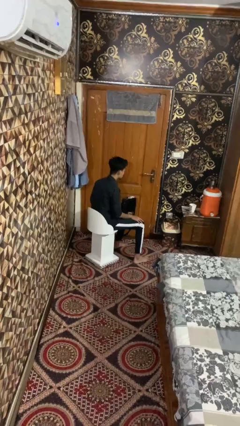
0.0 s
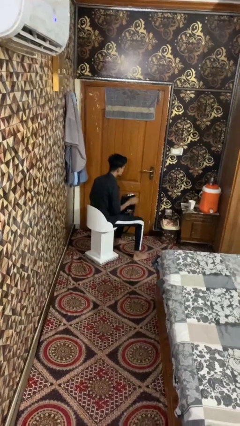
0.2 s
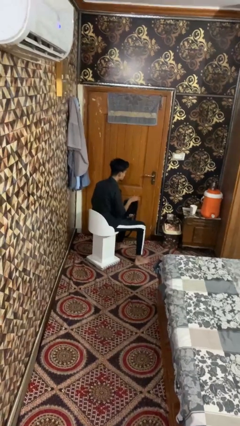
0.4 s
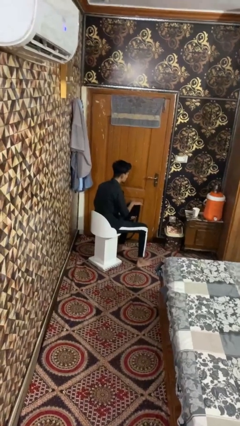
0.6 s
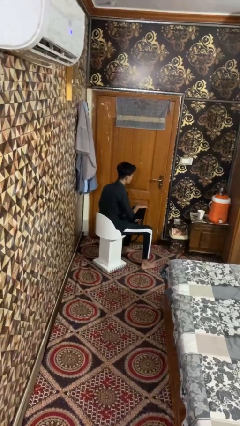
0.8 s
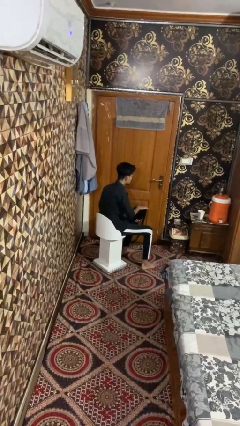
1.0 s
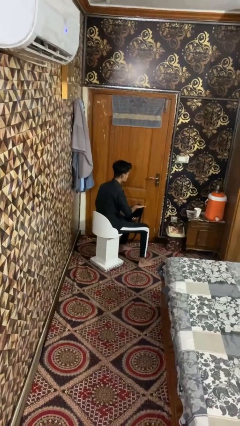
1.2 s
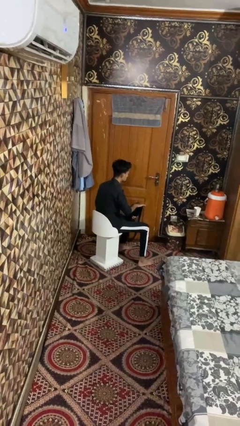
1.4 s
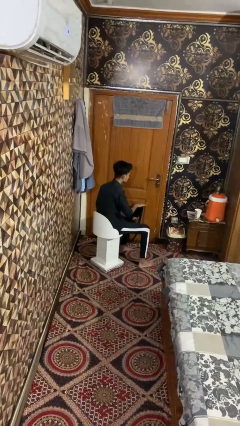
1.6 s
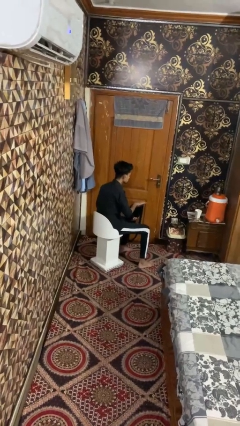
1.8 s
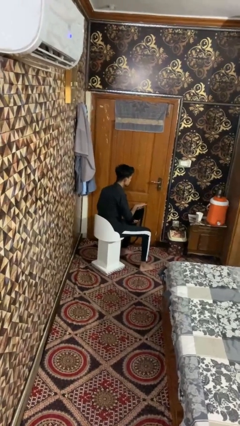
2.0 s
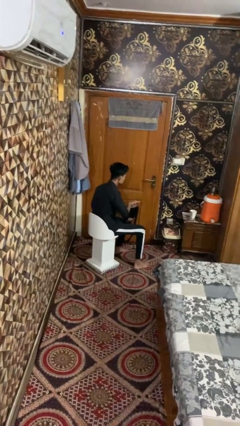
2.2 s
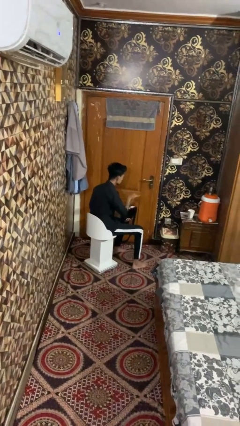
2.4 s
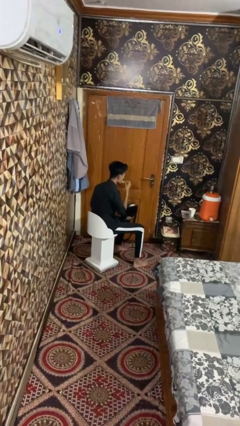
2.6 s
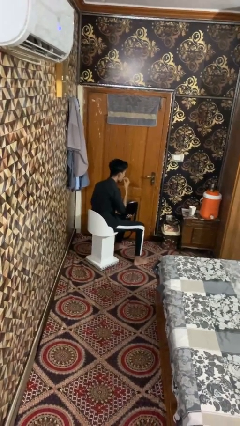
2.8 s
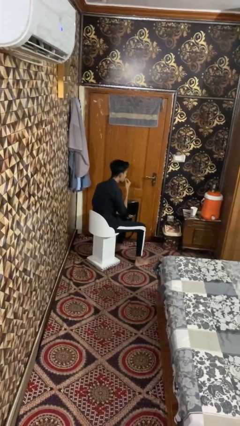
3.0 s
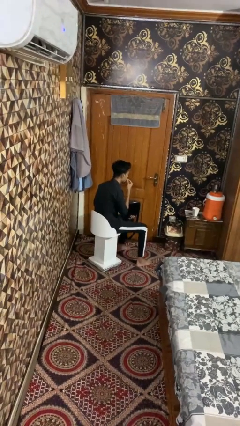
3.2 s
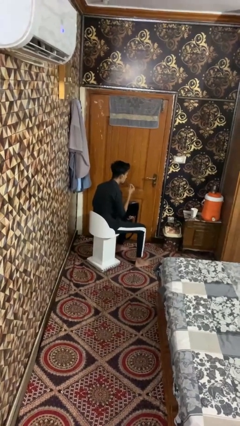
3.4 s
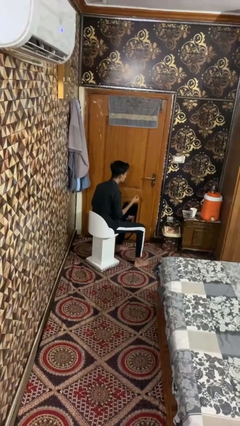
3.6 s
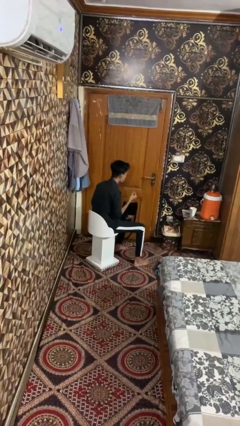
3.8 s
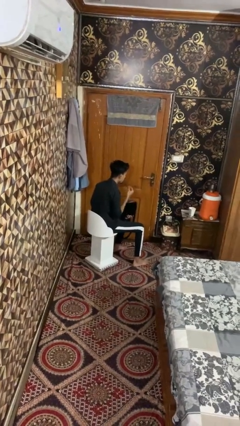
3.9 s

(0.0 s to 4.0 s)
person eats snack from bag

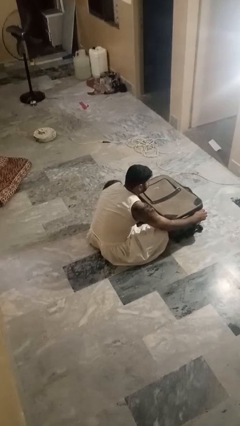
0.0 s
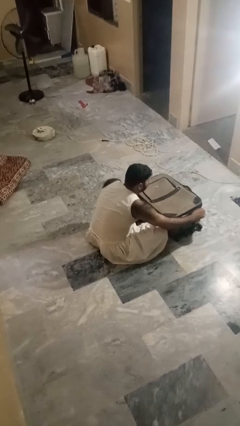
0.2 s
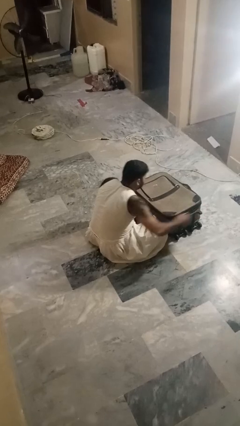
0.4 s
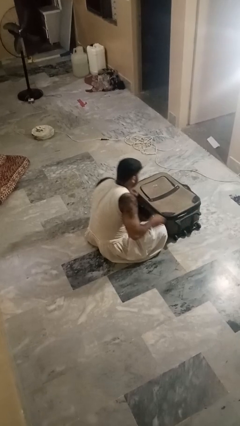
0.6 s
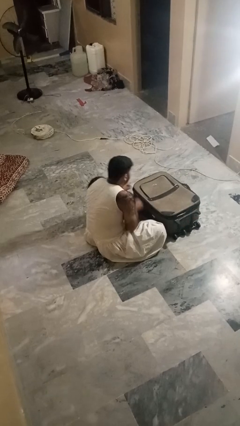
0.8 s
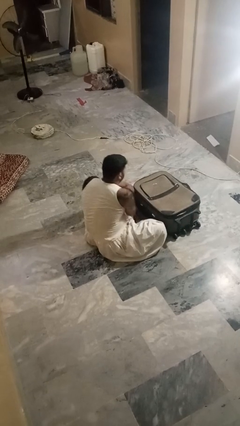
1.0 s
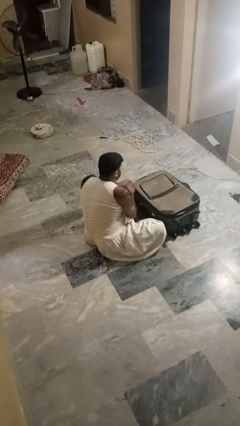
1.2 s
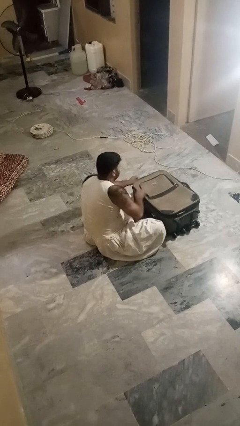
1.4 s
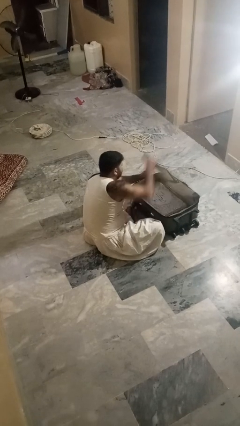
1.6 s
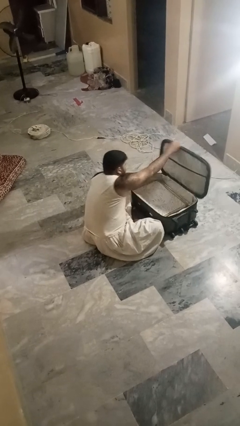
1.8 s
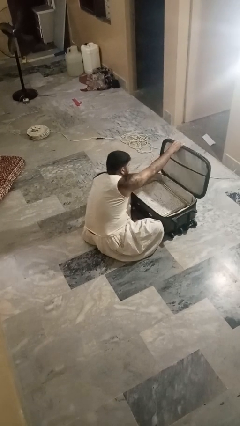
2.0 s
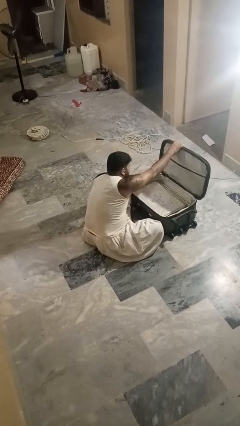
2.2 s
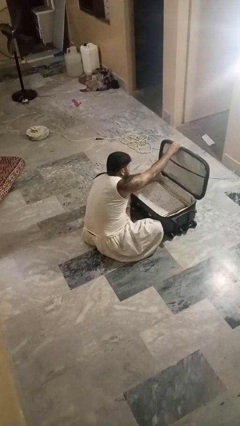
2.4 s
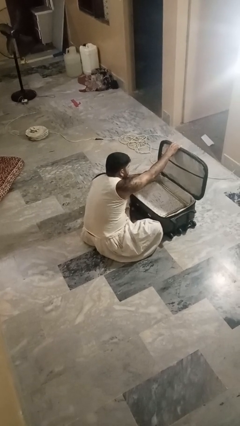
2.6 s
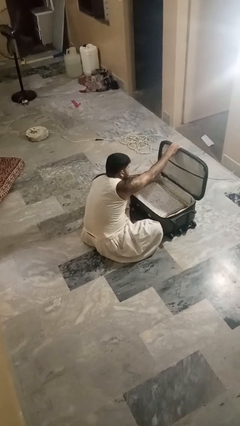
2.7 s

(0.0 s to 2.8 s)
person opens suitcase

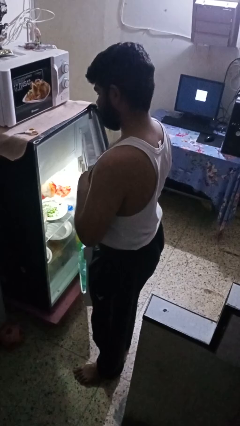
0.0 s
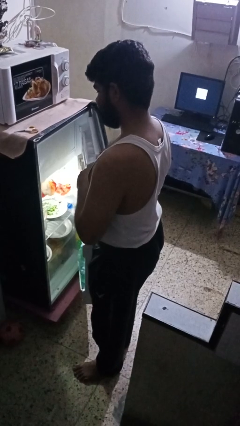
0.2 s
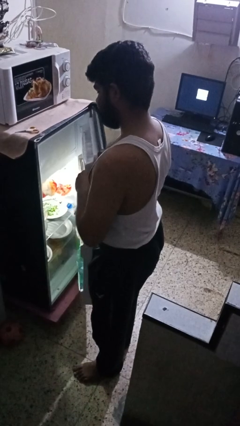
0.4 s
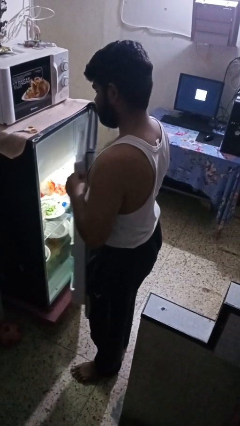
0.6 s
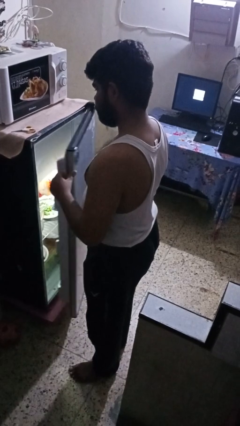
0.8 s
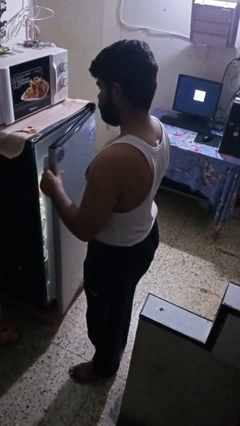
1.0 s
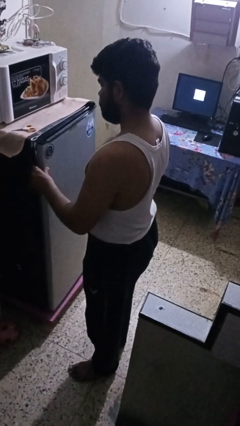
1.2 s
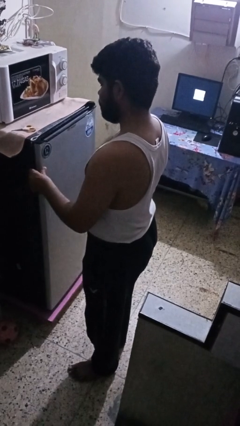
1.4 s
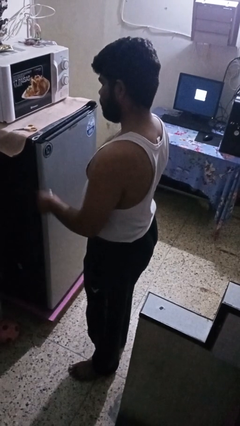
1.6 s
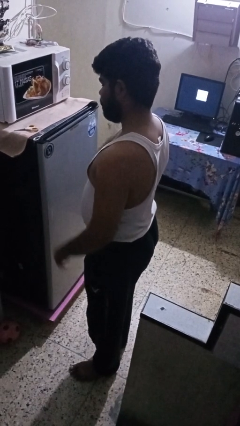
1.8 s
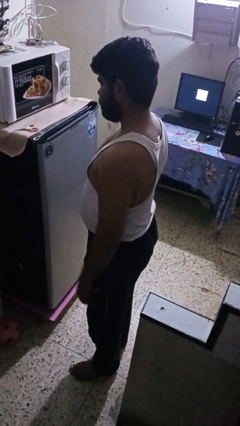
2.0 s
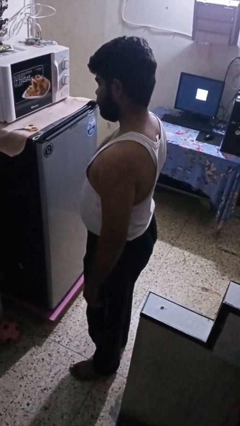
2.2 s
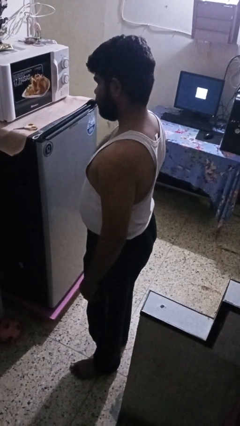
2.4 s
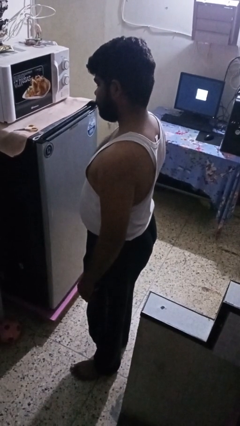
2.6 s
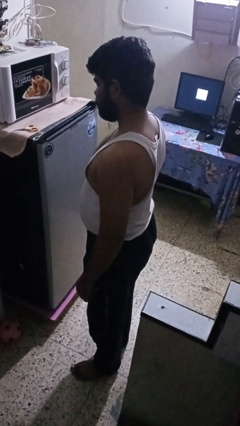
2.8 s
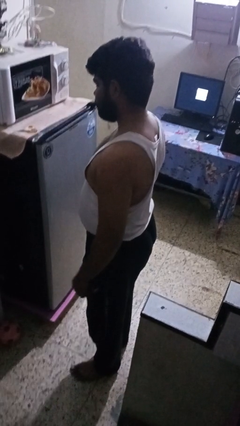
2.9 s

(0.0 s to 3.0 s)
person closes refrigerator

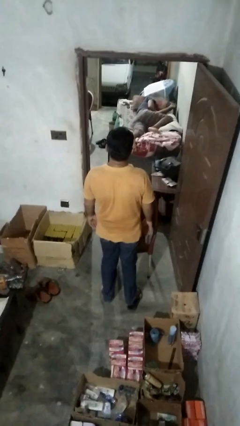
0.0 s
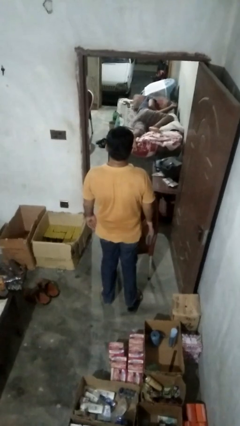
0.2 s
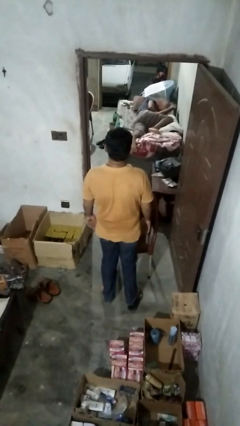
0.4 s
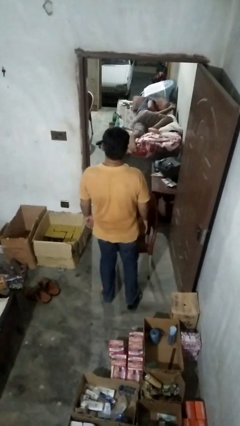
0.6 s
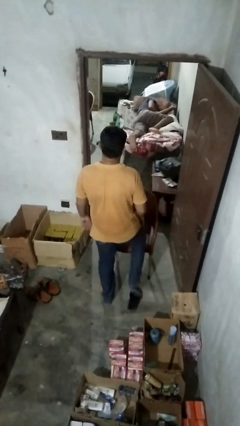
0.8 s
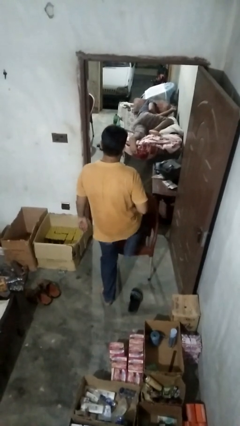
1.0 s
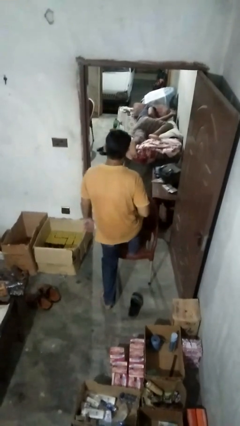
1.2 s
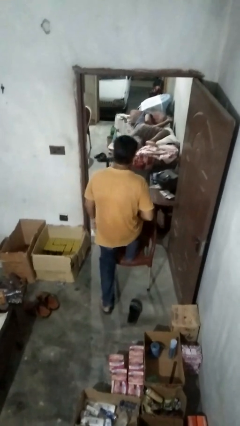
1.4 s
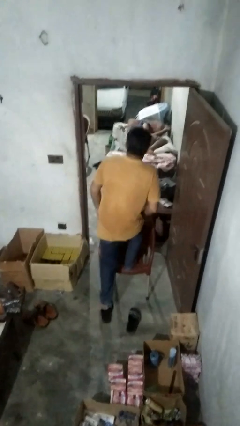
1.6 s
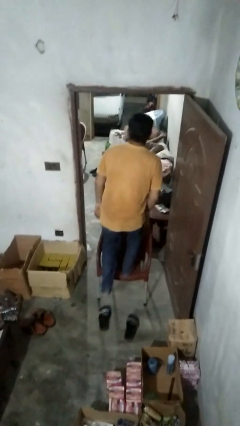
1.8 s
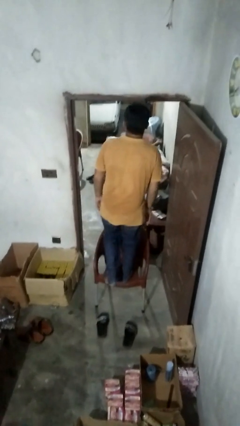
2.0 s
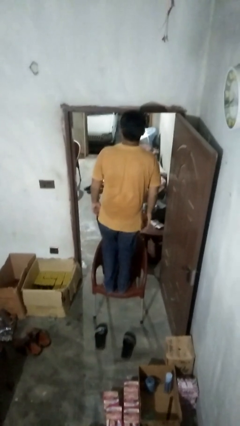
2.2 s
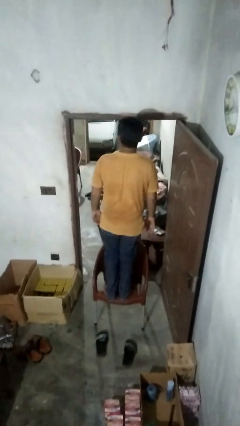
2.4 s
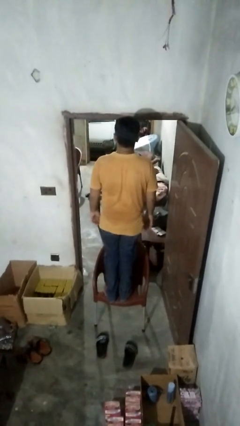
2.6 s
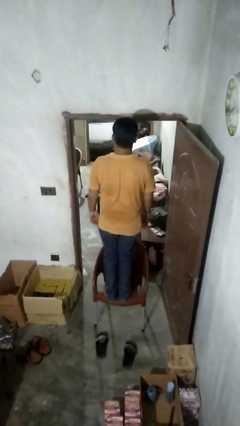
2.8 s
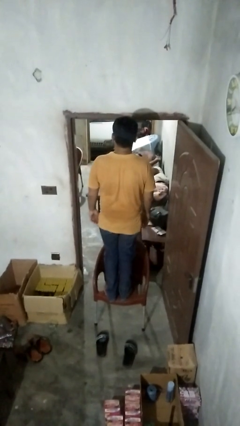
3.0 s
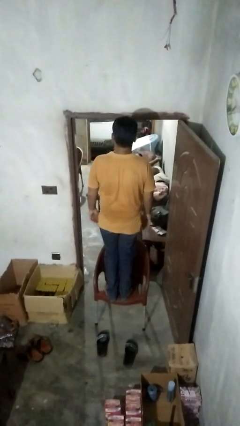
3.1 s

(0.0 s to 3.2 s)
person climbs on chair

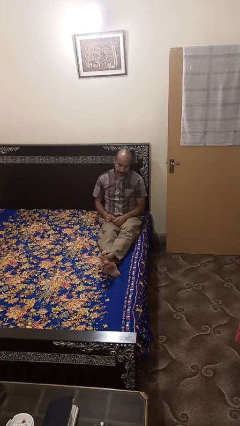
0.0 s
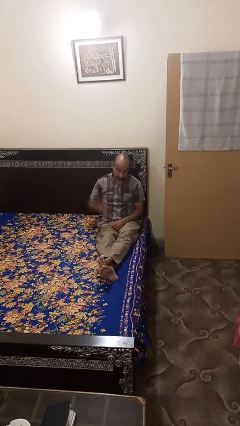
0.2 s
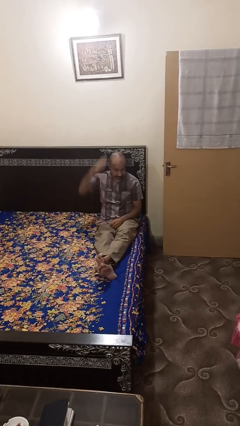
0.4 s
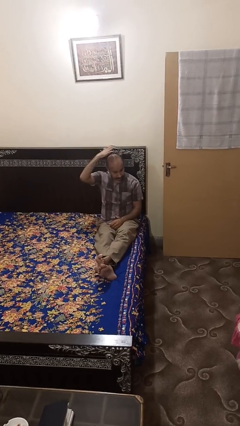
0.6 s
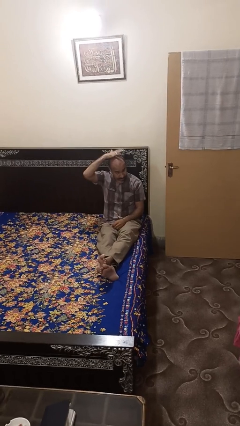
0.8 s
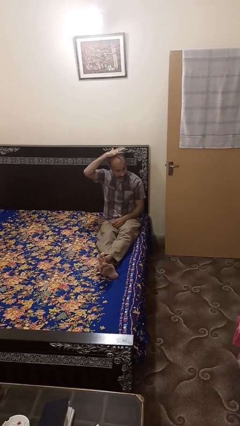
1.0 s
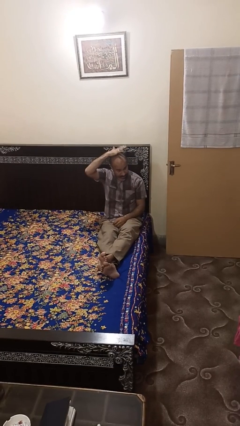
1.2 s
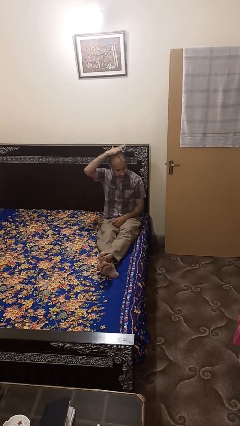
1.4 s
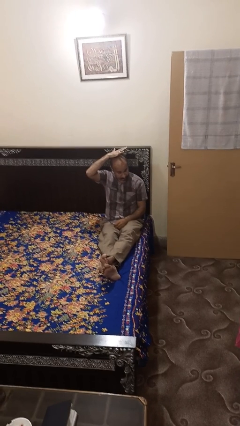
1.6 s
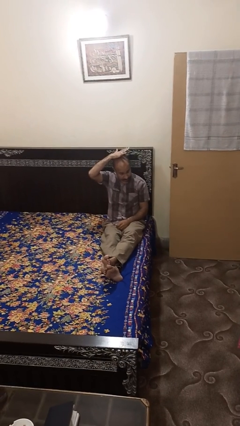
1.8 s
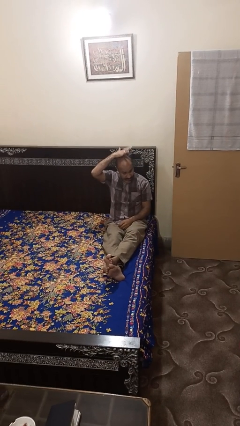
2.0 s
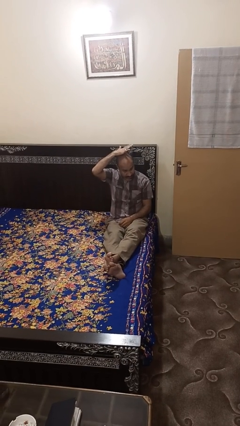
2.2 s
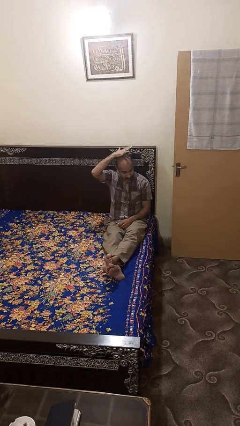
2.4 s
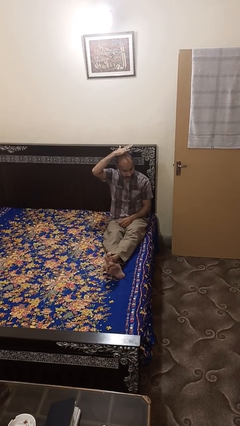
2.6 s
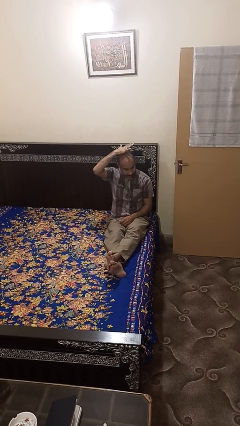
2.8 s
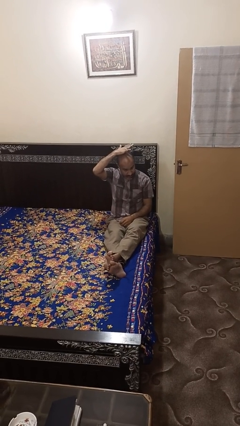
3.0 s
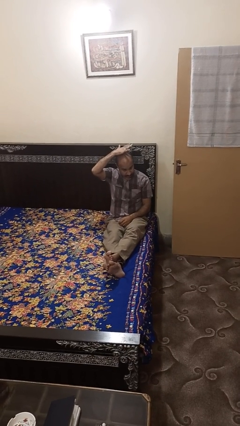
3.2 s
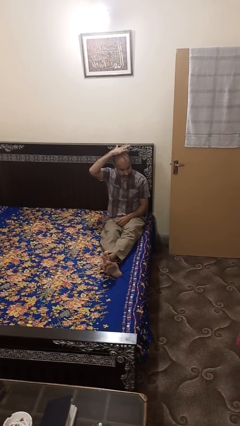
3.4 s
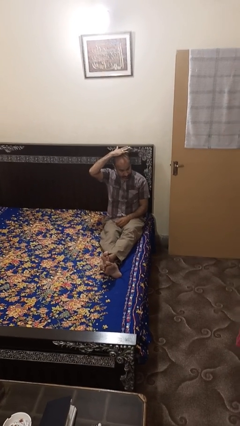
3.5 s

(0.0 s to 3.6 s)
person pats head

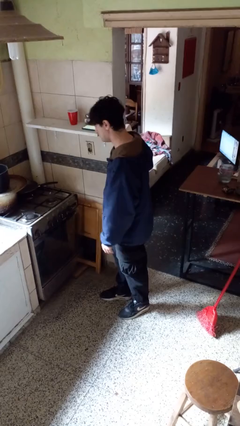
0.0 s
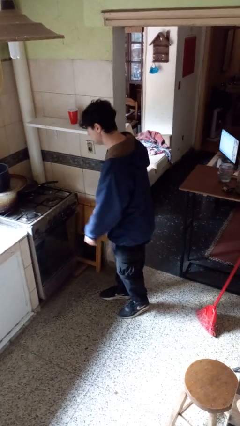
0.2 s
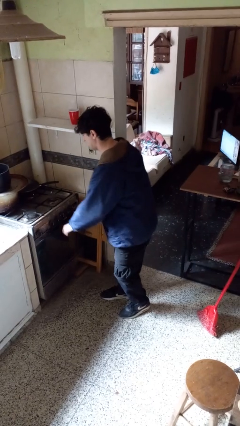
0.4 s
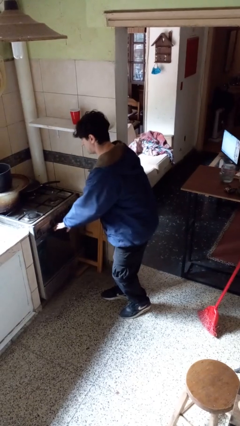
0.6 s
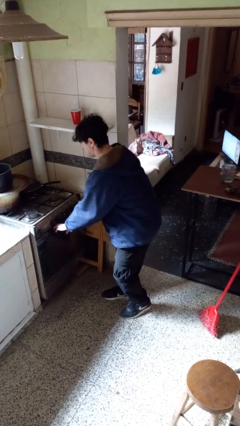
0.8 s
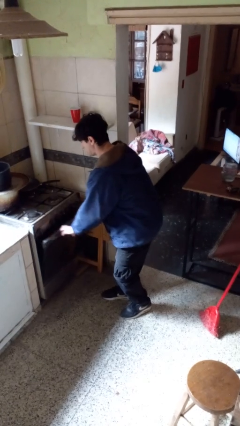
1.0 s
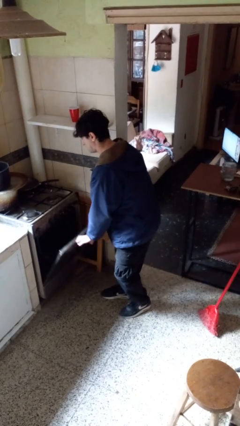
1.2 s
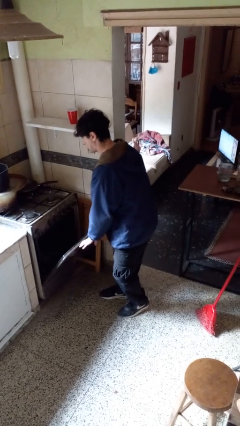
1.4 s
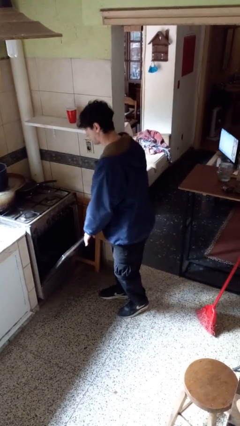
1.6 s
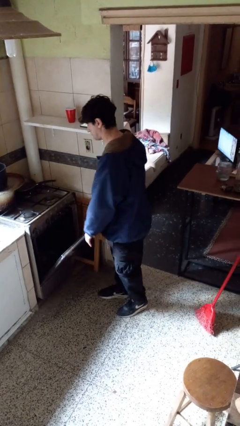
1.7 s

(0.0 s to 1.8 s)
person opens oven door
